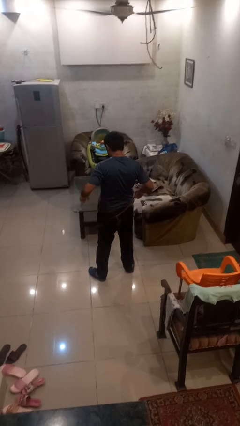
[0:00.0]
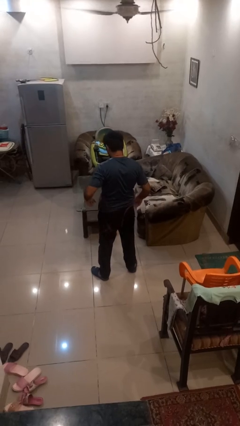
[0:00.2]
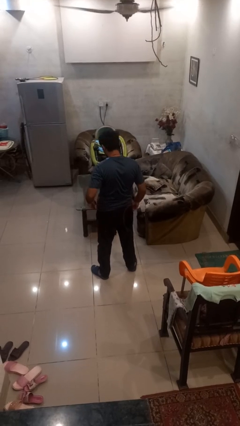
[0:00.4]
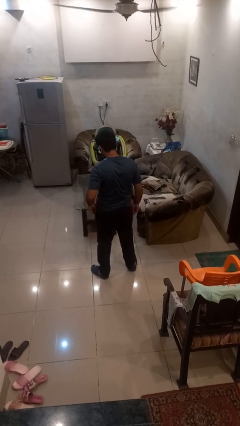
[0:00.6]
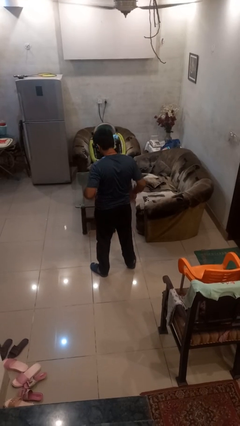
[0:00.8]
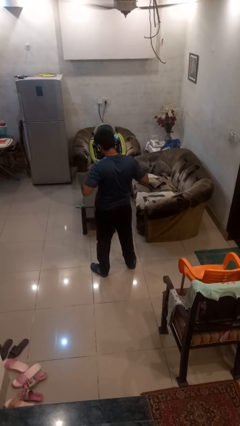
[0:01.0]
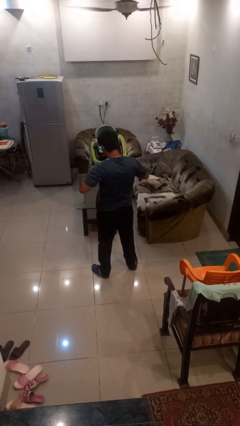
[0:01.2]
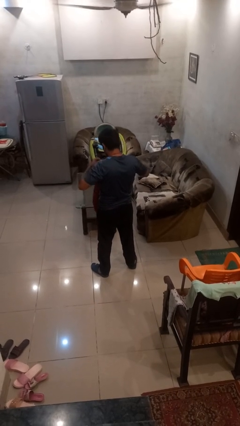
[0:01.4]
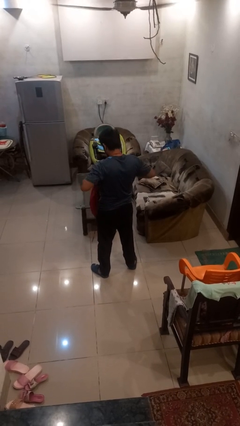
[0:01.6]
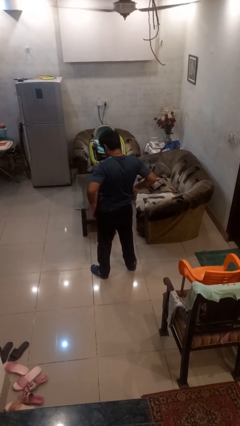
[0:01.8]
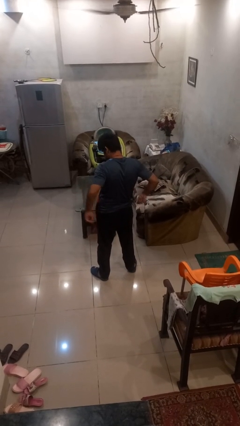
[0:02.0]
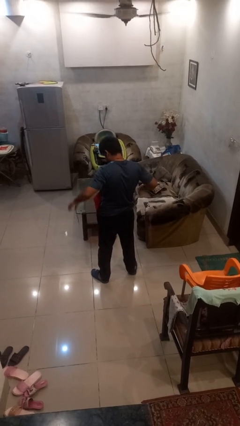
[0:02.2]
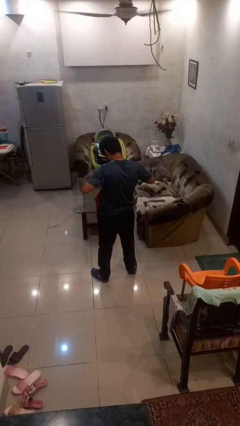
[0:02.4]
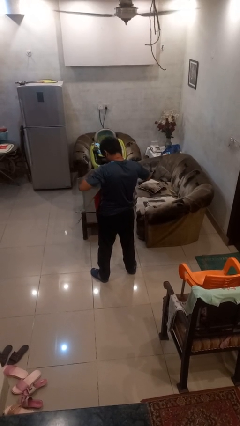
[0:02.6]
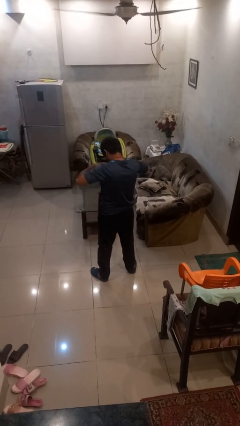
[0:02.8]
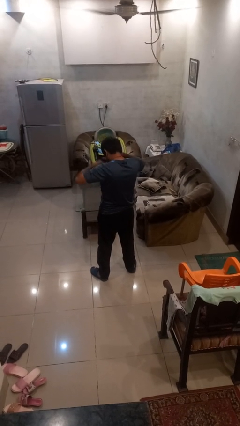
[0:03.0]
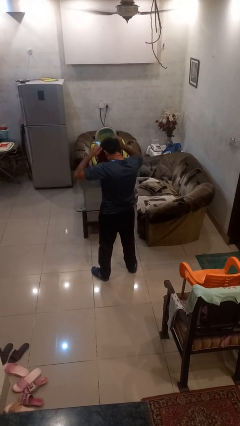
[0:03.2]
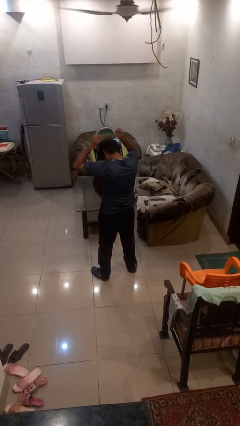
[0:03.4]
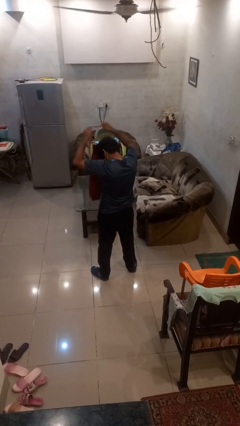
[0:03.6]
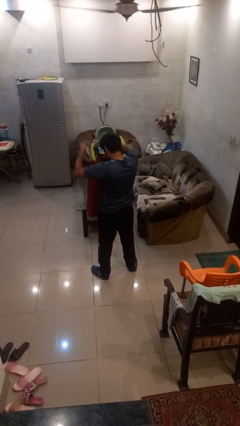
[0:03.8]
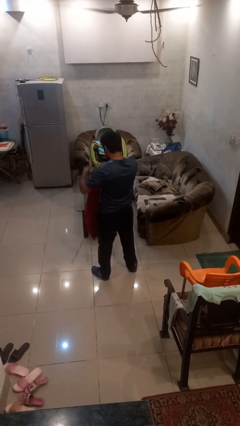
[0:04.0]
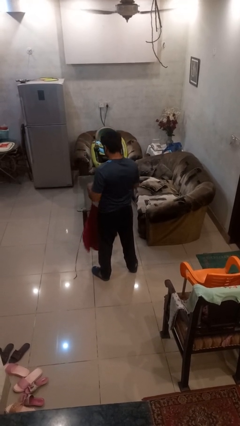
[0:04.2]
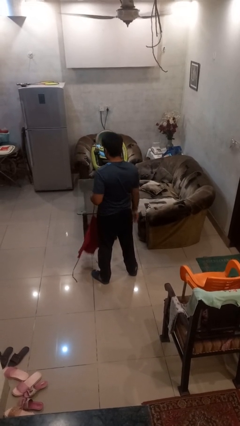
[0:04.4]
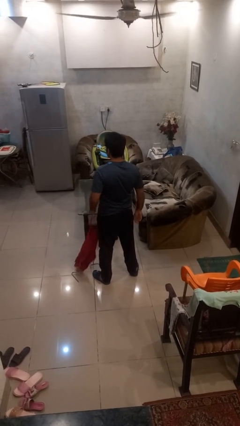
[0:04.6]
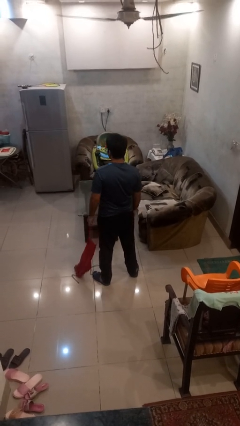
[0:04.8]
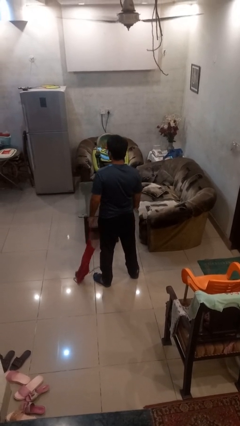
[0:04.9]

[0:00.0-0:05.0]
person takes off apron

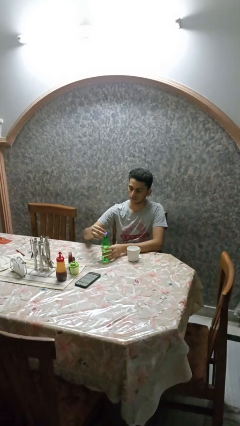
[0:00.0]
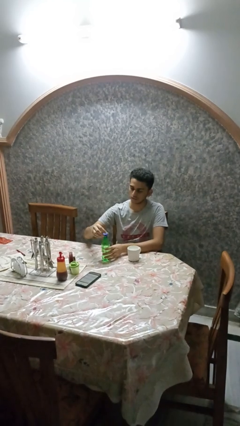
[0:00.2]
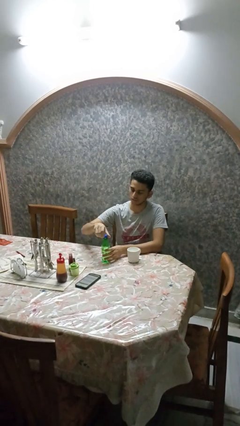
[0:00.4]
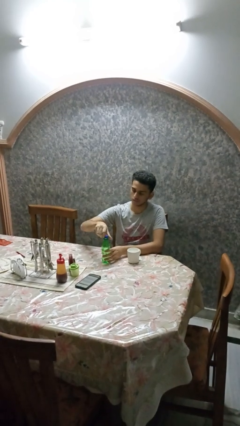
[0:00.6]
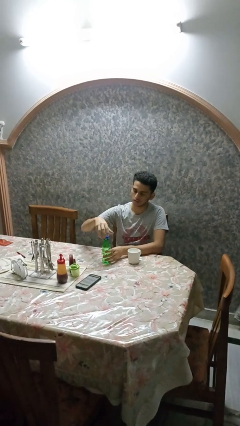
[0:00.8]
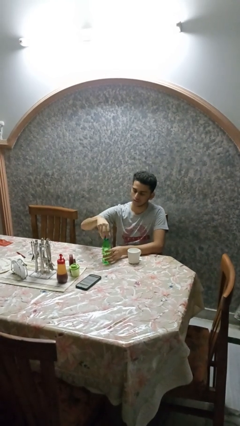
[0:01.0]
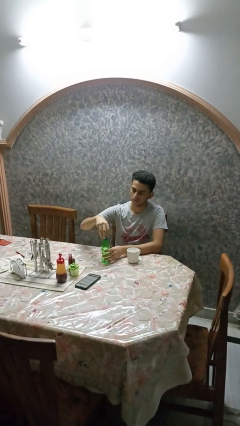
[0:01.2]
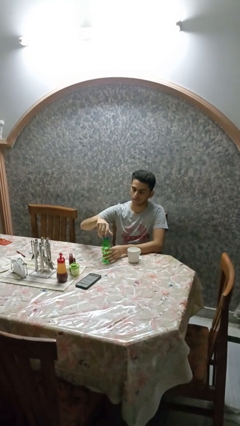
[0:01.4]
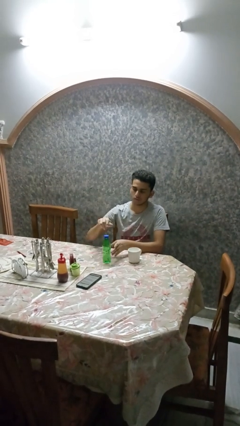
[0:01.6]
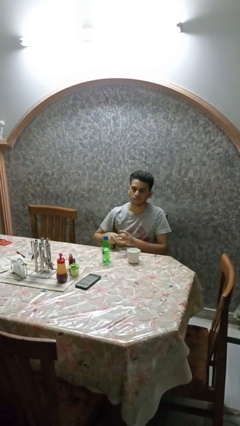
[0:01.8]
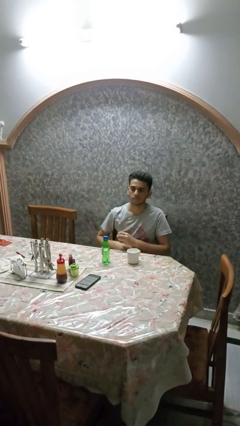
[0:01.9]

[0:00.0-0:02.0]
person screws lid to bottle

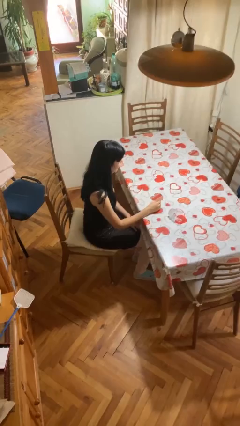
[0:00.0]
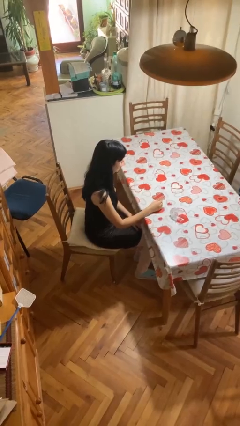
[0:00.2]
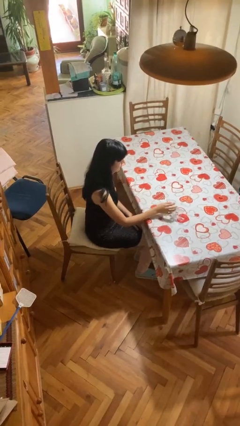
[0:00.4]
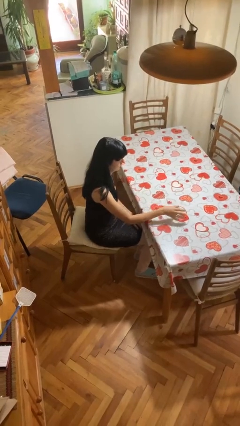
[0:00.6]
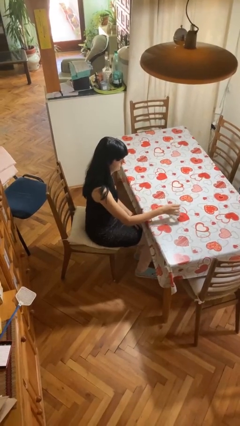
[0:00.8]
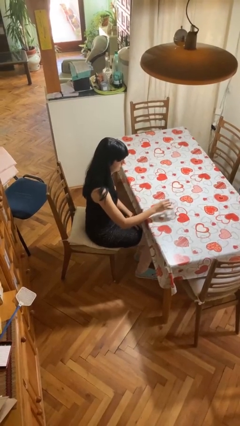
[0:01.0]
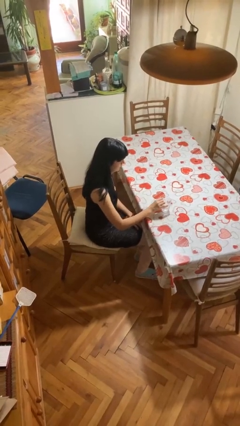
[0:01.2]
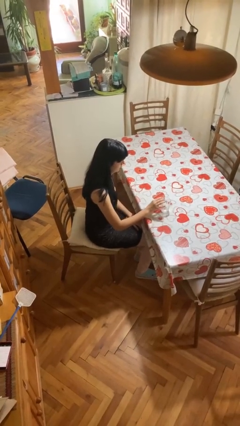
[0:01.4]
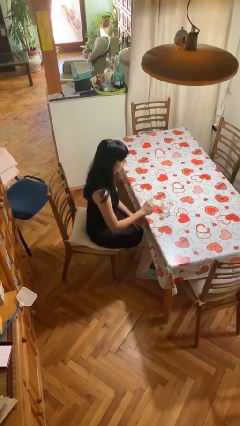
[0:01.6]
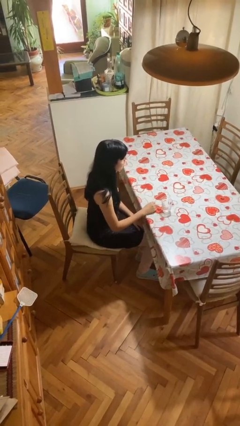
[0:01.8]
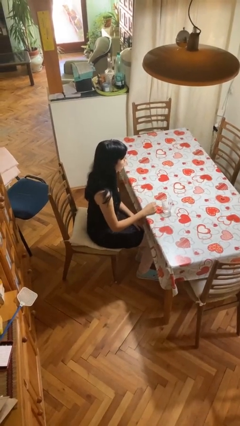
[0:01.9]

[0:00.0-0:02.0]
person sets upright glass

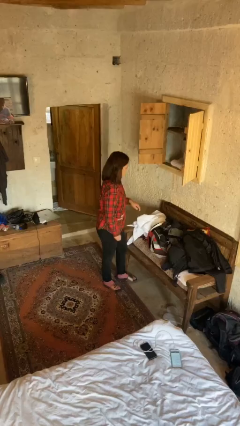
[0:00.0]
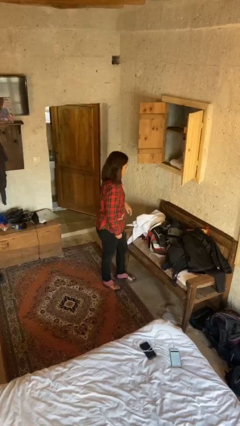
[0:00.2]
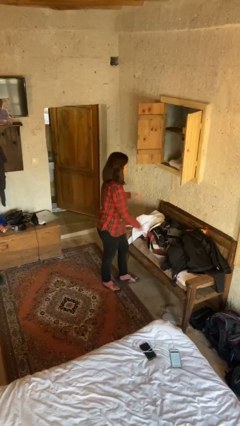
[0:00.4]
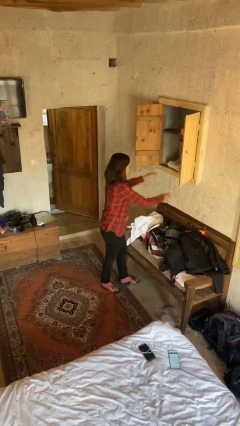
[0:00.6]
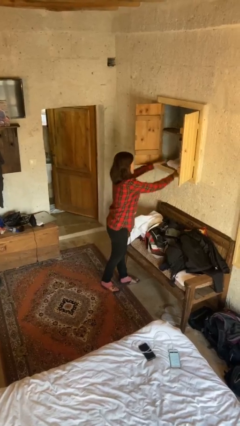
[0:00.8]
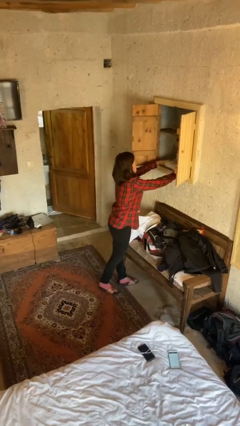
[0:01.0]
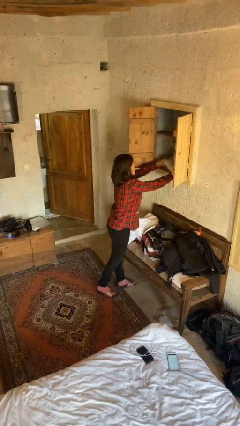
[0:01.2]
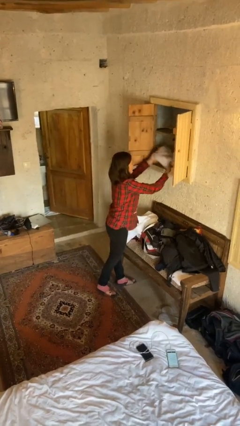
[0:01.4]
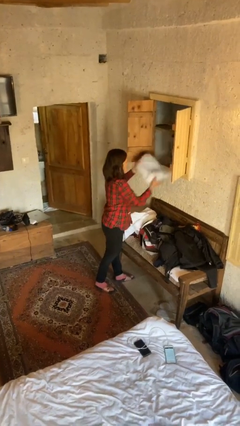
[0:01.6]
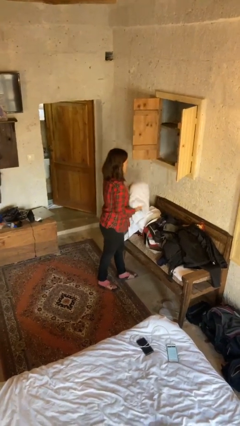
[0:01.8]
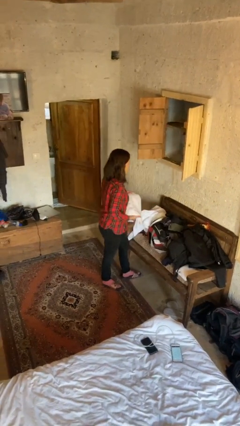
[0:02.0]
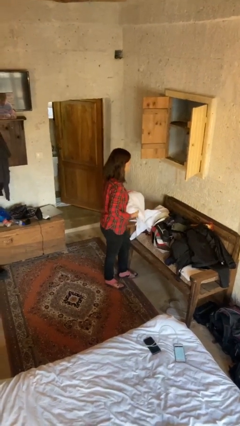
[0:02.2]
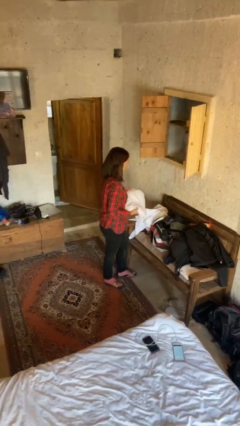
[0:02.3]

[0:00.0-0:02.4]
person takes clothes from dresser

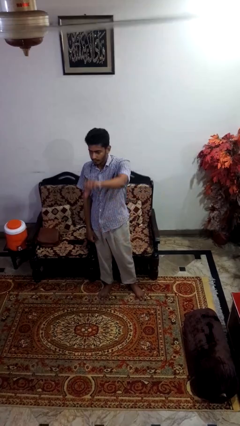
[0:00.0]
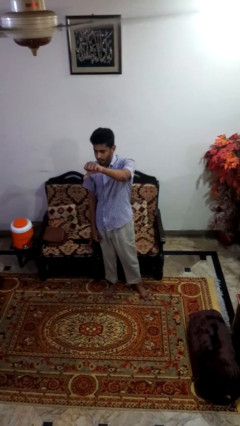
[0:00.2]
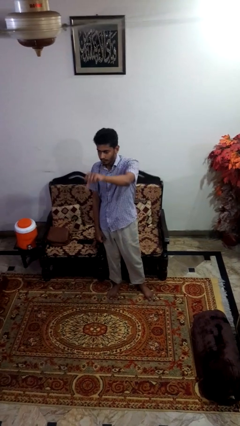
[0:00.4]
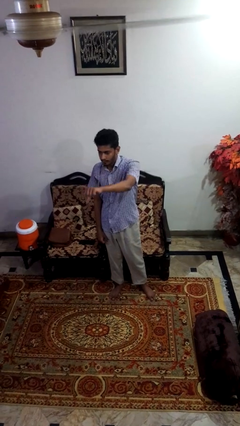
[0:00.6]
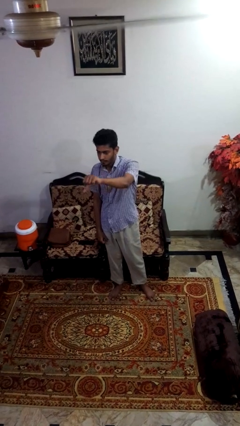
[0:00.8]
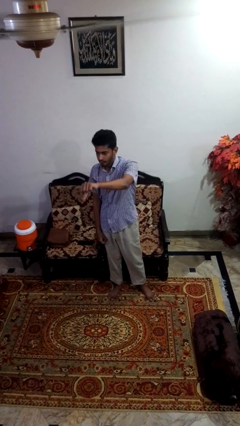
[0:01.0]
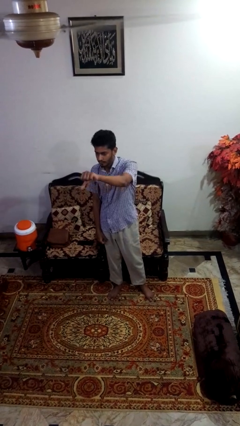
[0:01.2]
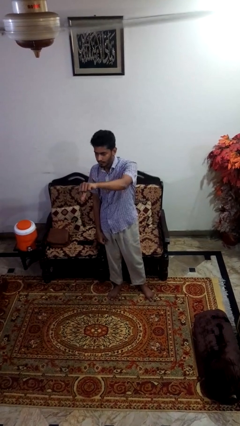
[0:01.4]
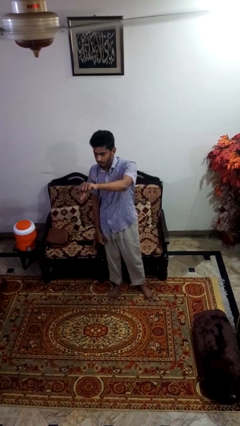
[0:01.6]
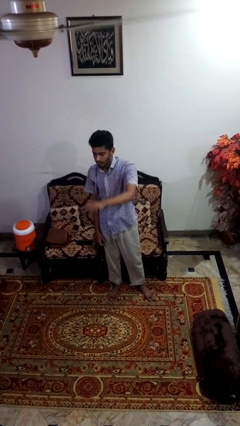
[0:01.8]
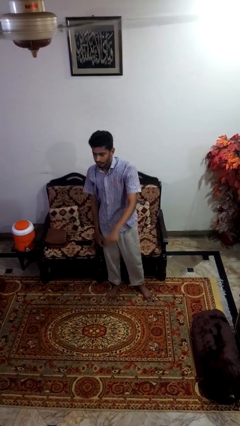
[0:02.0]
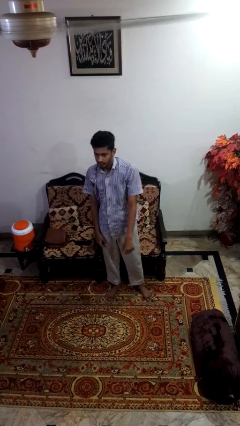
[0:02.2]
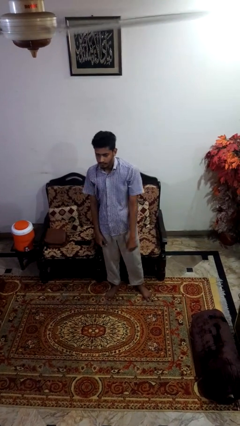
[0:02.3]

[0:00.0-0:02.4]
person gestures thumbs down

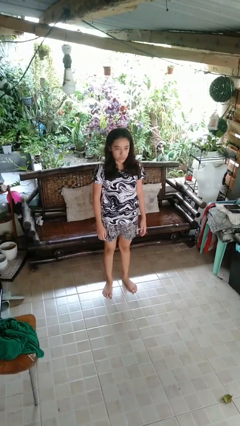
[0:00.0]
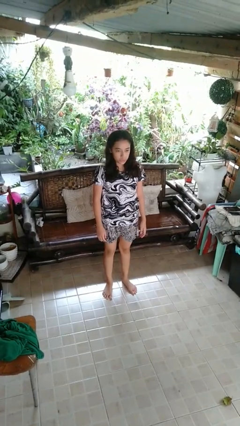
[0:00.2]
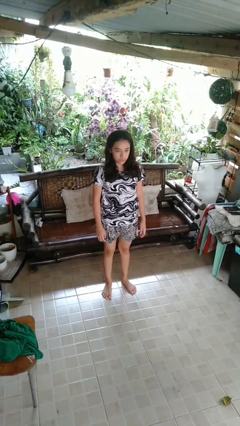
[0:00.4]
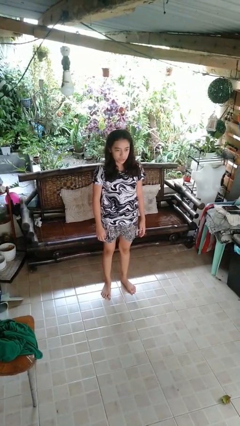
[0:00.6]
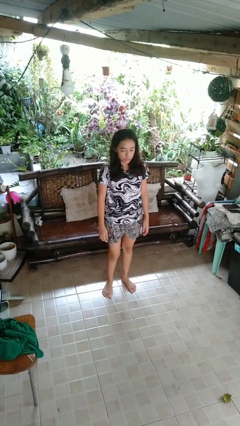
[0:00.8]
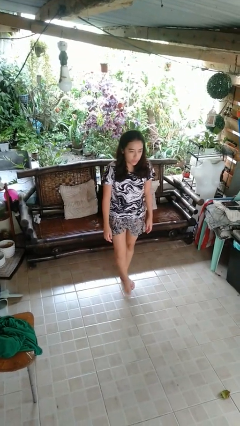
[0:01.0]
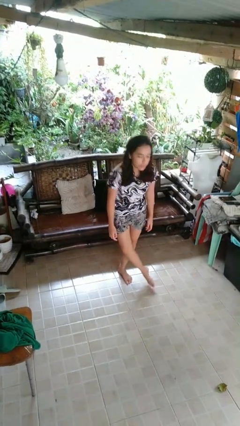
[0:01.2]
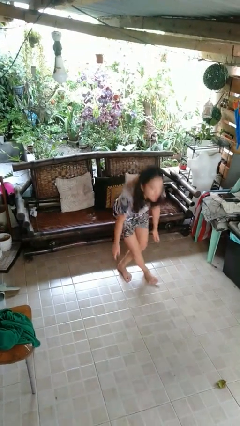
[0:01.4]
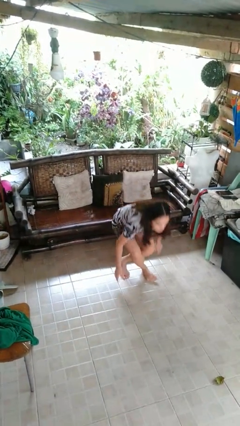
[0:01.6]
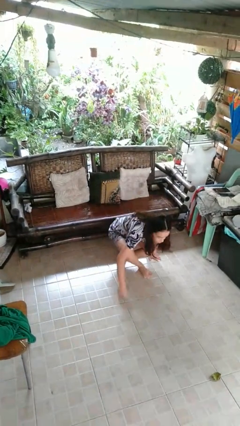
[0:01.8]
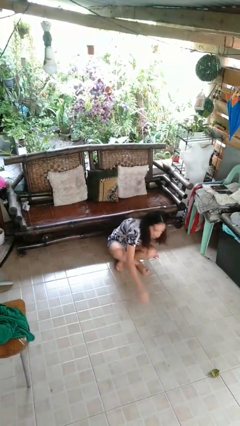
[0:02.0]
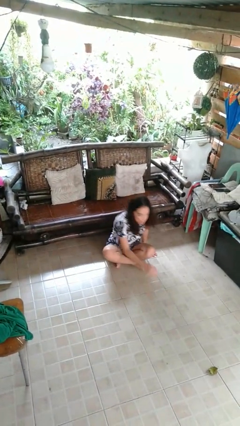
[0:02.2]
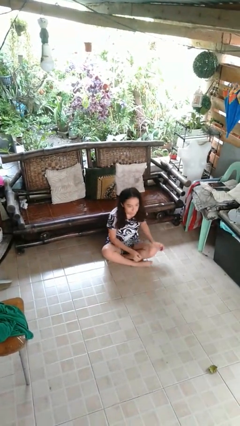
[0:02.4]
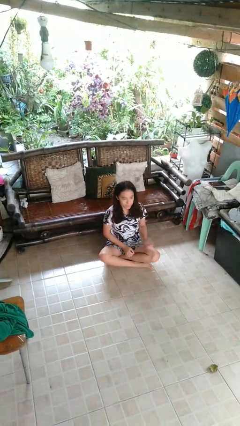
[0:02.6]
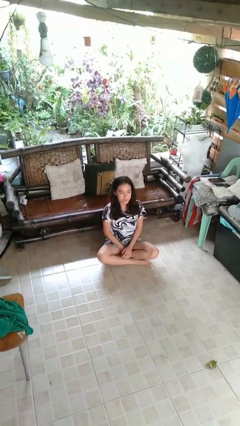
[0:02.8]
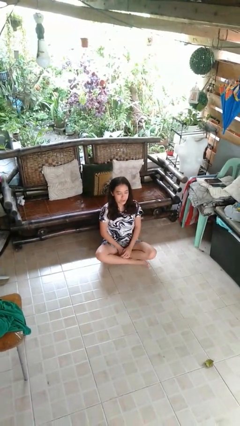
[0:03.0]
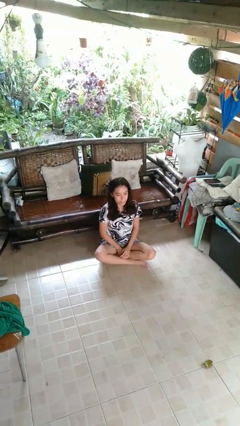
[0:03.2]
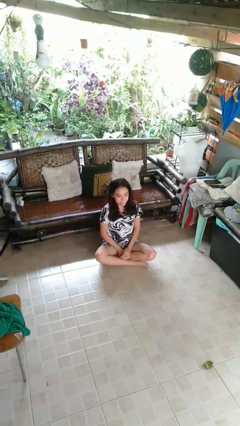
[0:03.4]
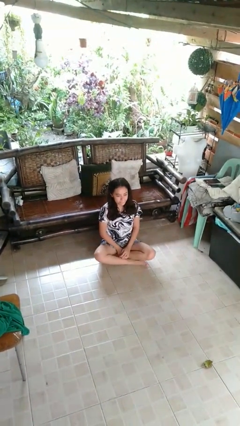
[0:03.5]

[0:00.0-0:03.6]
person sits crisscross

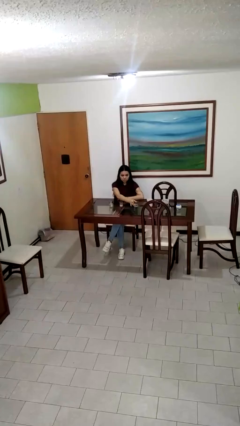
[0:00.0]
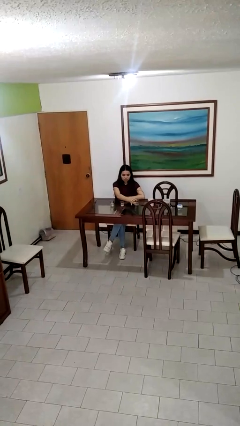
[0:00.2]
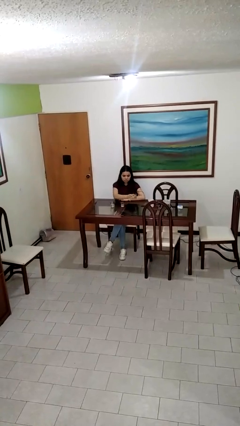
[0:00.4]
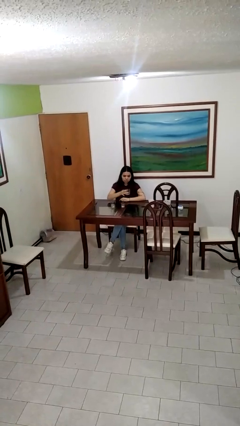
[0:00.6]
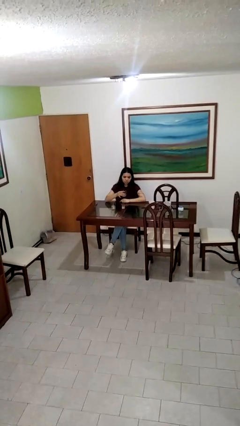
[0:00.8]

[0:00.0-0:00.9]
person picks up object from table
